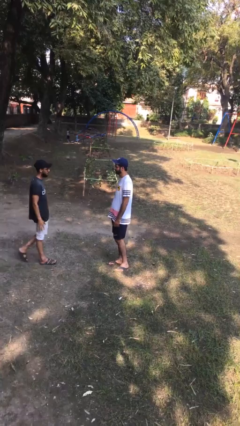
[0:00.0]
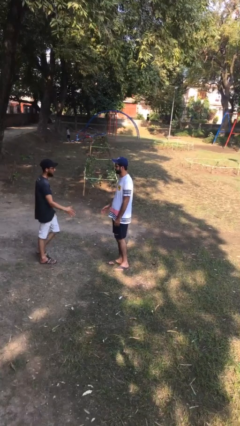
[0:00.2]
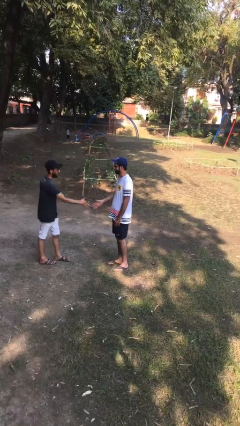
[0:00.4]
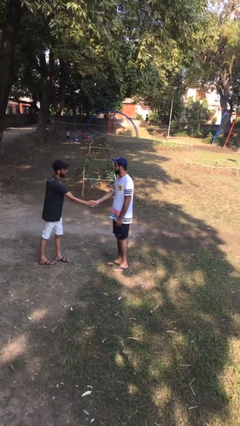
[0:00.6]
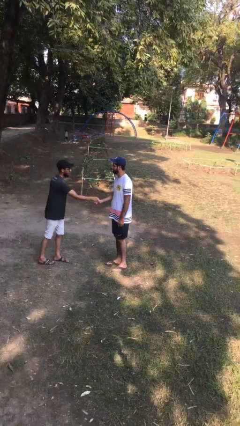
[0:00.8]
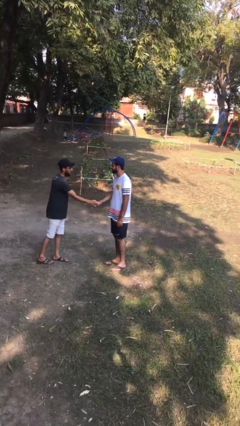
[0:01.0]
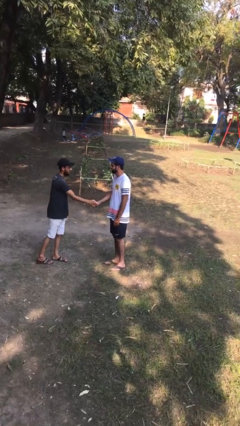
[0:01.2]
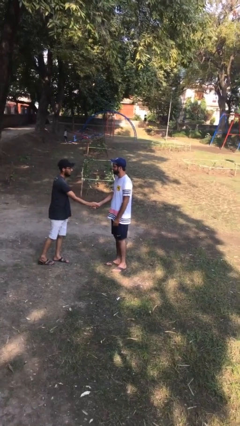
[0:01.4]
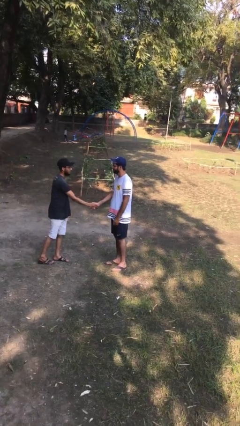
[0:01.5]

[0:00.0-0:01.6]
person shakes hand

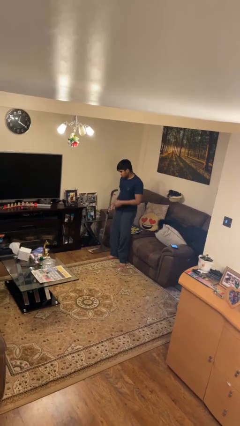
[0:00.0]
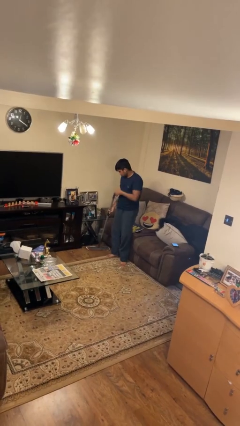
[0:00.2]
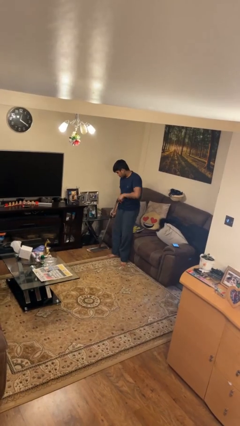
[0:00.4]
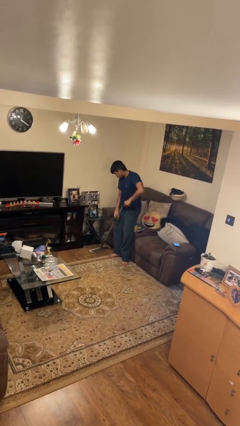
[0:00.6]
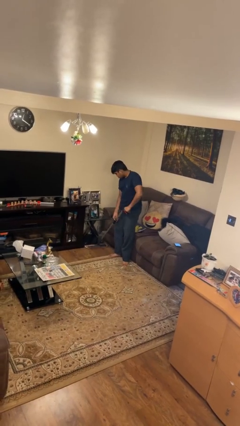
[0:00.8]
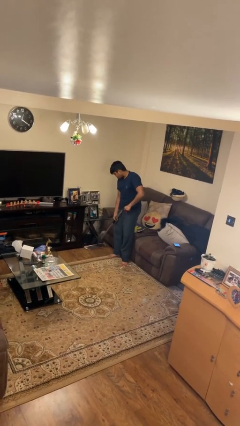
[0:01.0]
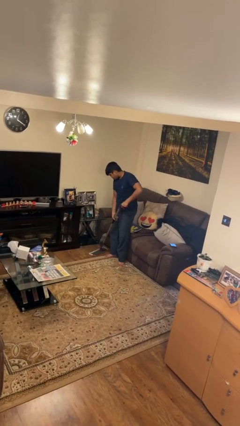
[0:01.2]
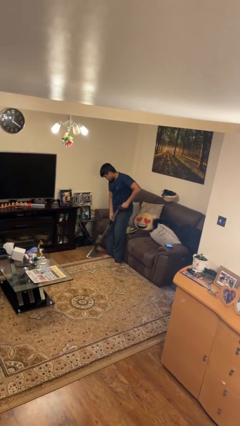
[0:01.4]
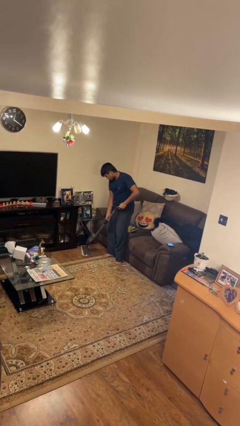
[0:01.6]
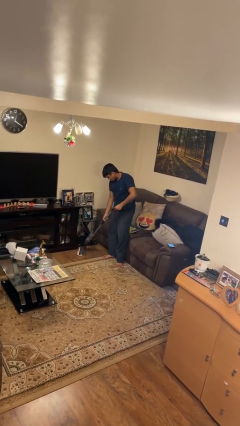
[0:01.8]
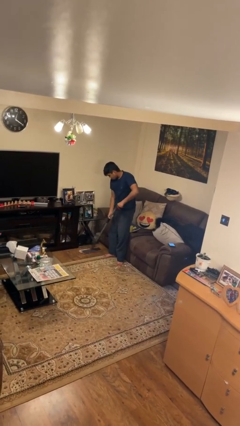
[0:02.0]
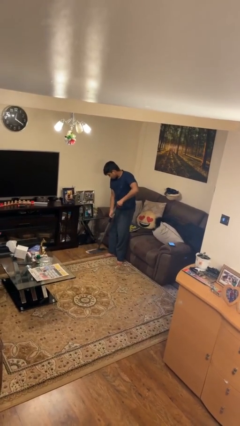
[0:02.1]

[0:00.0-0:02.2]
person mops

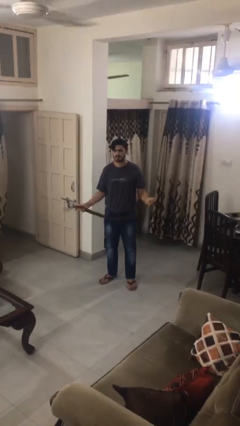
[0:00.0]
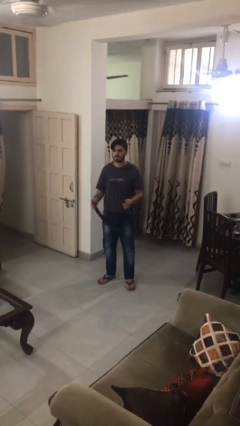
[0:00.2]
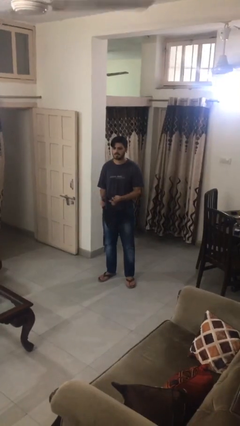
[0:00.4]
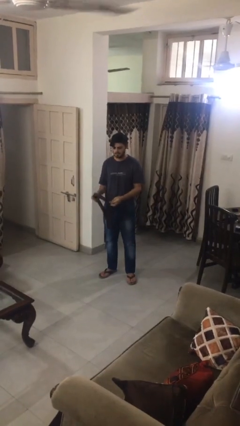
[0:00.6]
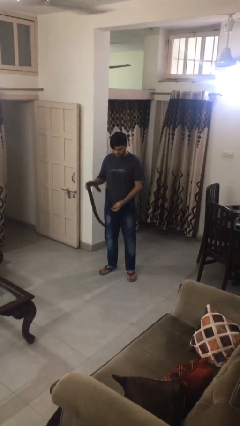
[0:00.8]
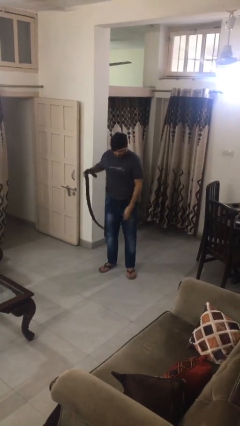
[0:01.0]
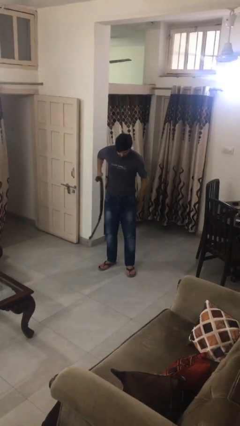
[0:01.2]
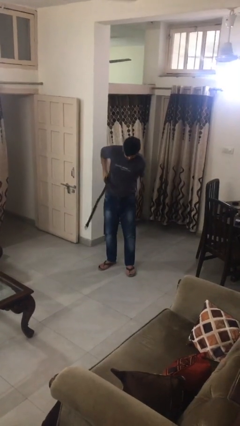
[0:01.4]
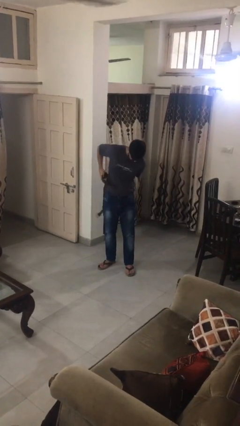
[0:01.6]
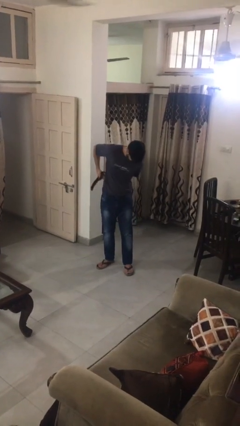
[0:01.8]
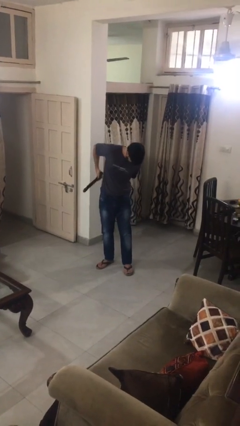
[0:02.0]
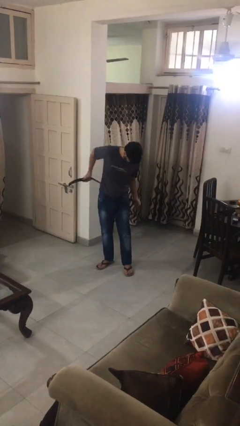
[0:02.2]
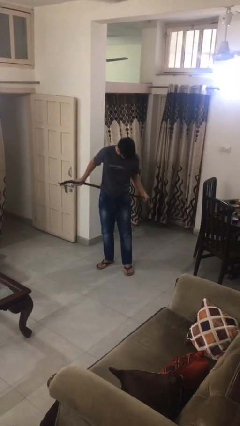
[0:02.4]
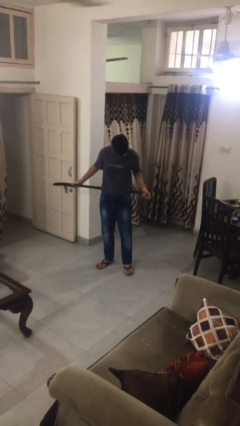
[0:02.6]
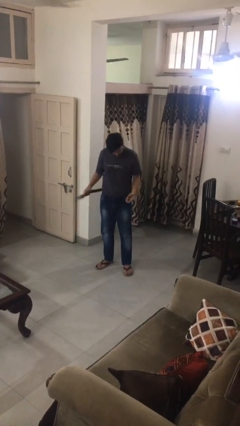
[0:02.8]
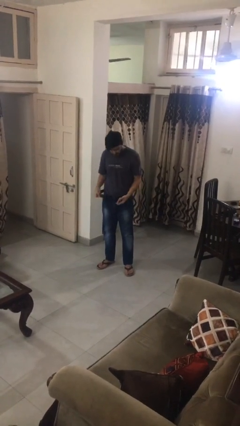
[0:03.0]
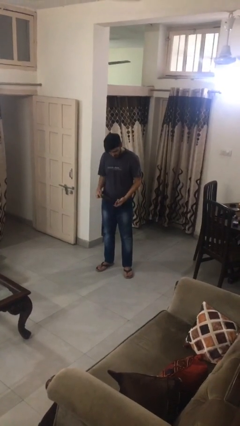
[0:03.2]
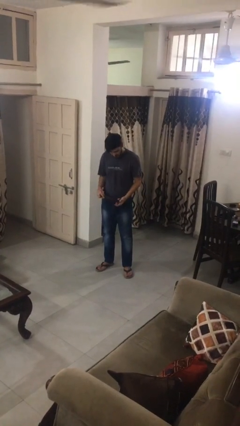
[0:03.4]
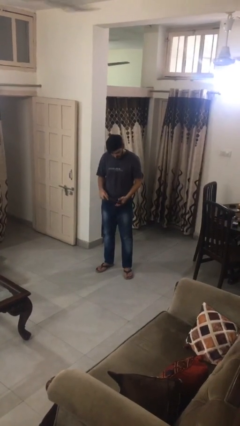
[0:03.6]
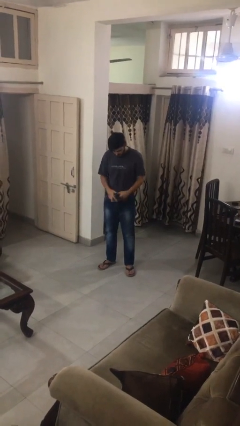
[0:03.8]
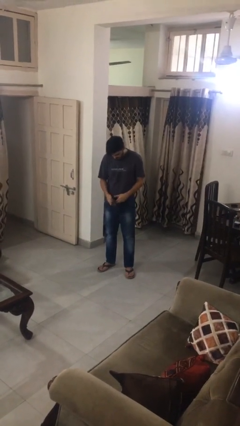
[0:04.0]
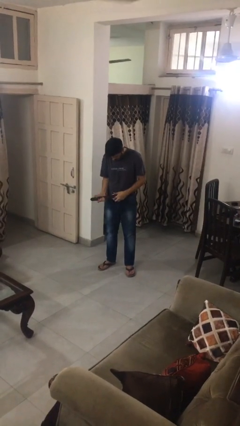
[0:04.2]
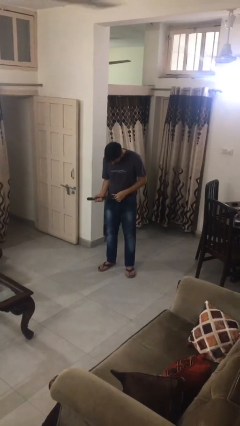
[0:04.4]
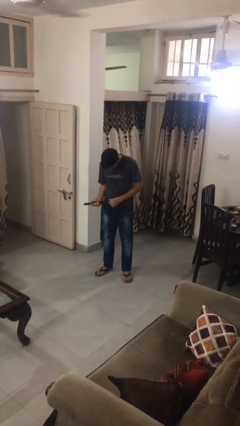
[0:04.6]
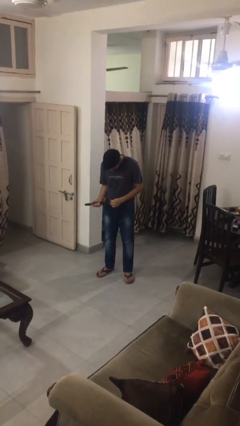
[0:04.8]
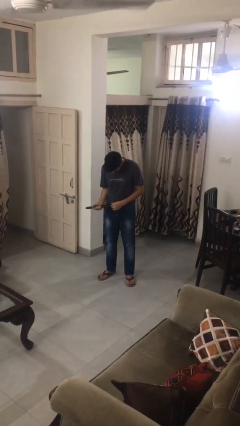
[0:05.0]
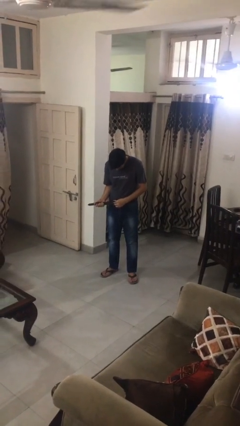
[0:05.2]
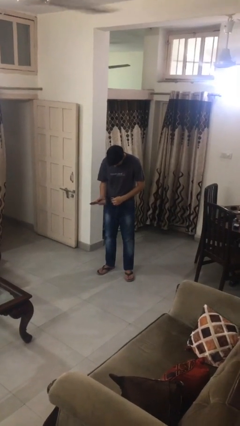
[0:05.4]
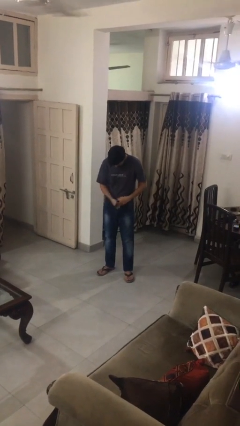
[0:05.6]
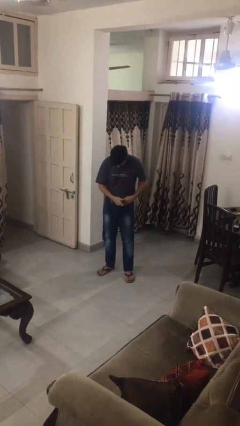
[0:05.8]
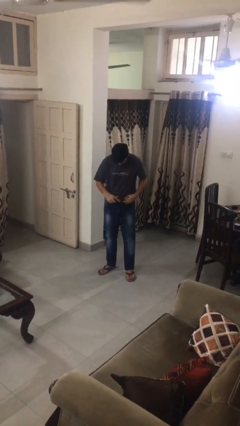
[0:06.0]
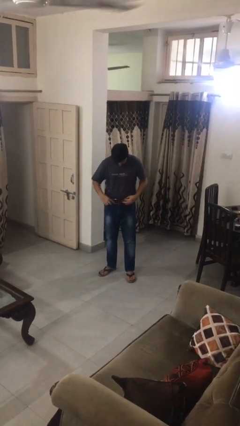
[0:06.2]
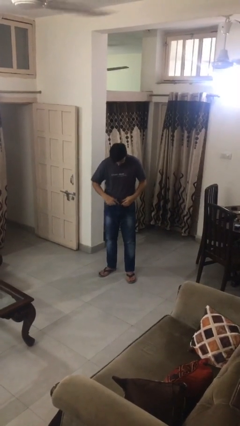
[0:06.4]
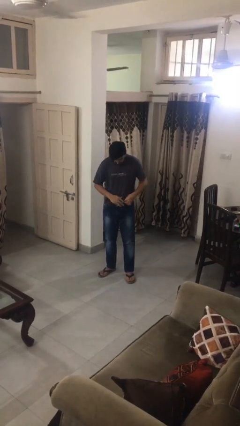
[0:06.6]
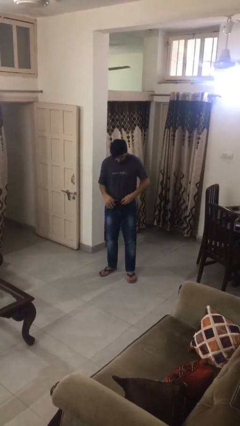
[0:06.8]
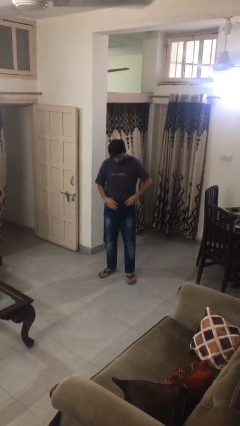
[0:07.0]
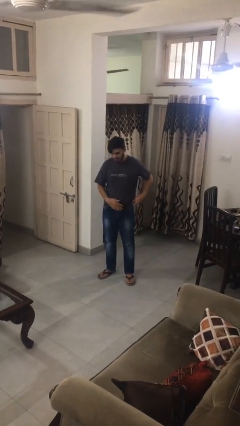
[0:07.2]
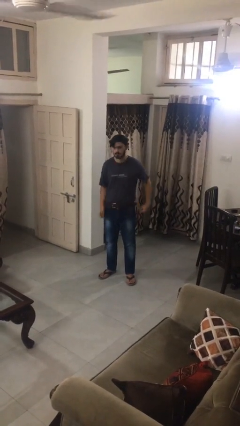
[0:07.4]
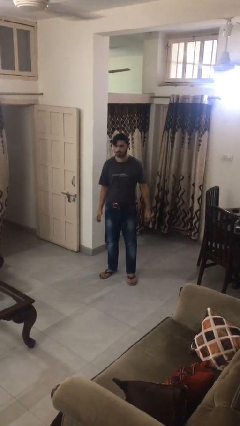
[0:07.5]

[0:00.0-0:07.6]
person puts on belt

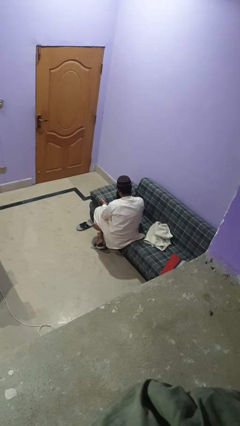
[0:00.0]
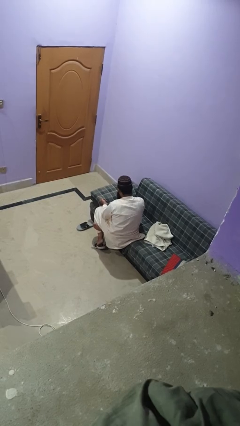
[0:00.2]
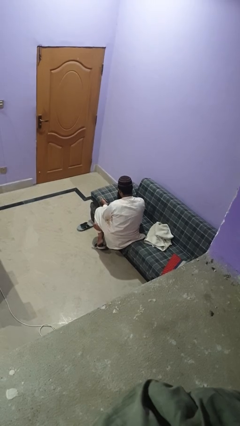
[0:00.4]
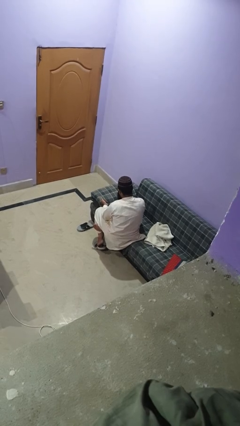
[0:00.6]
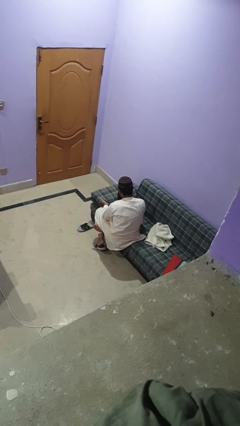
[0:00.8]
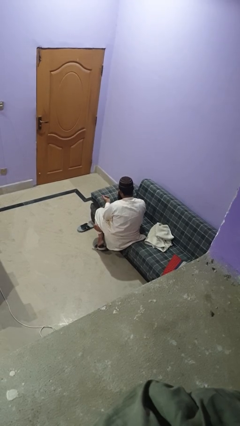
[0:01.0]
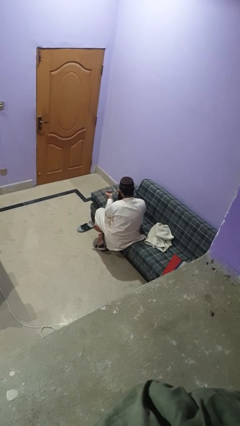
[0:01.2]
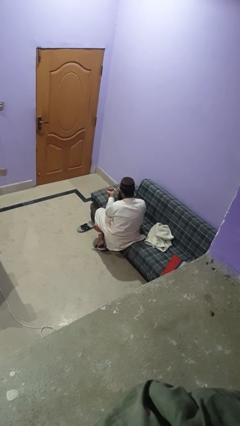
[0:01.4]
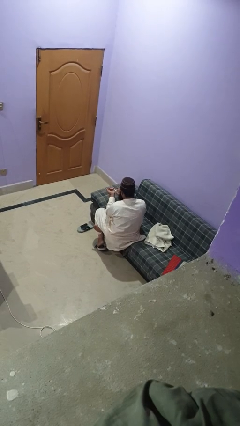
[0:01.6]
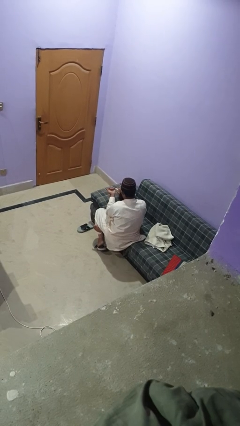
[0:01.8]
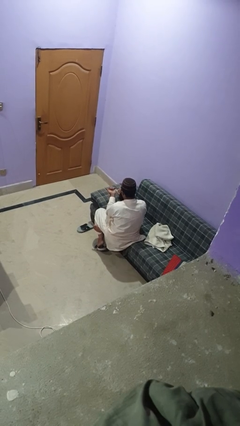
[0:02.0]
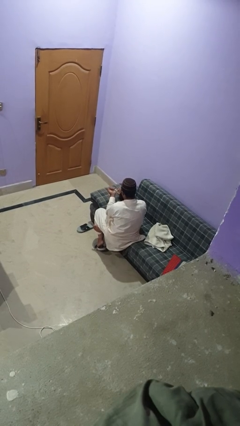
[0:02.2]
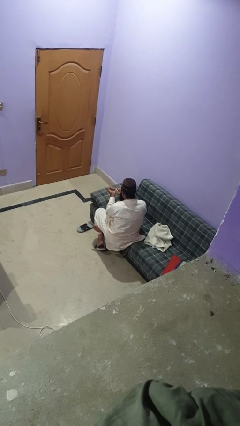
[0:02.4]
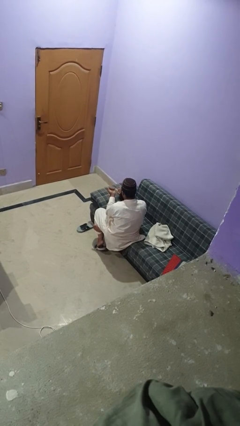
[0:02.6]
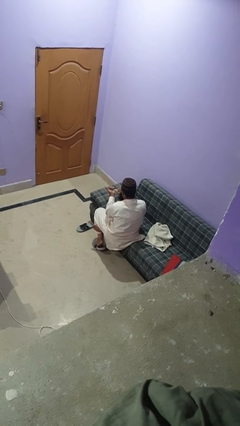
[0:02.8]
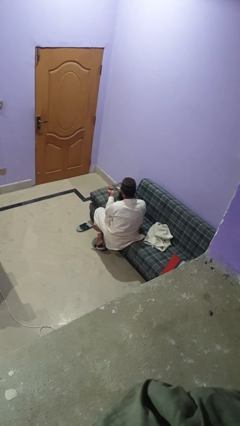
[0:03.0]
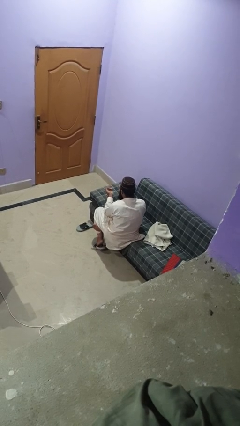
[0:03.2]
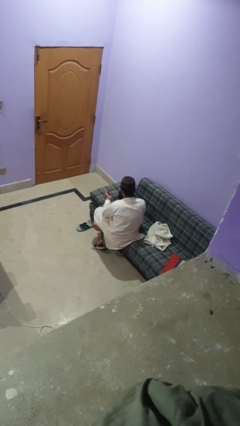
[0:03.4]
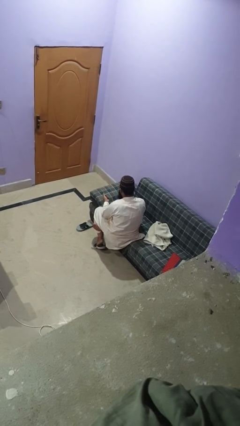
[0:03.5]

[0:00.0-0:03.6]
person paints fingernails

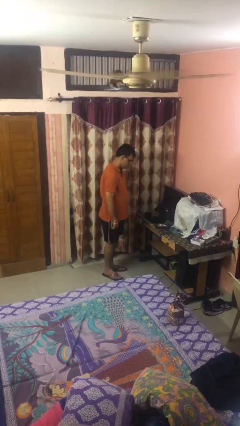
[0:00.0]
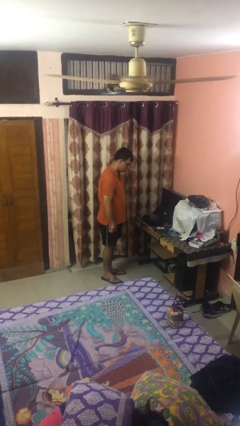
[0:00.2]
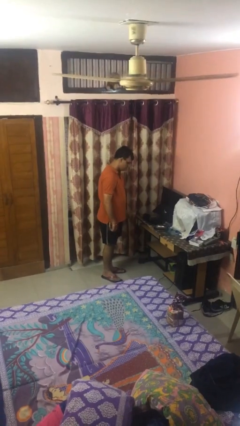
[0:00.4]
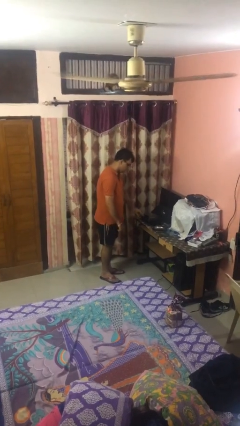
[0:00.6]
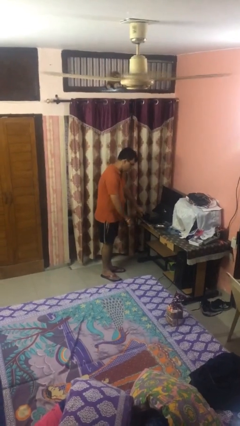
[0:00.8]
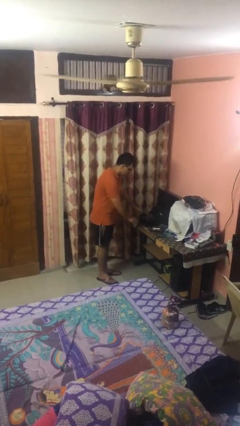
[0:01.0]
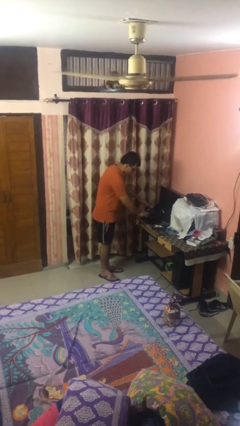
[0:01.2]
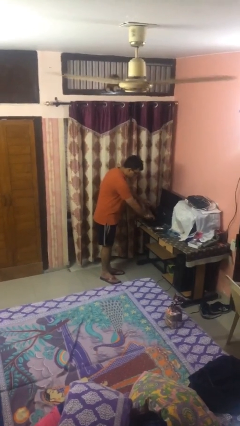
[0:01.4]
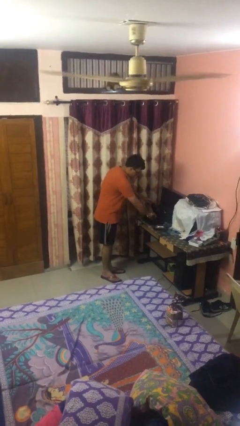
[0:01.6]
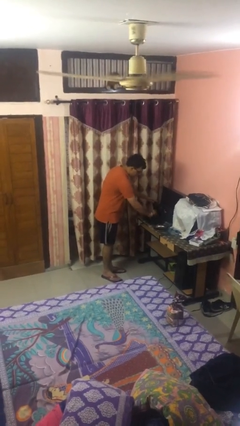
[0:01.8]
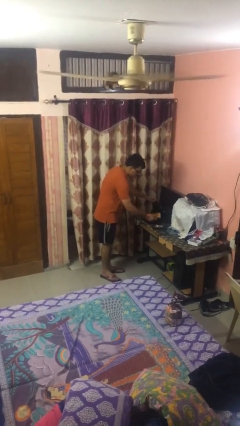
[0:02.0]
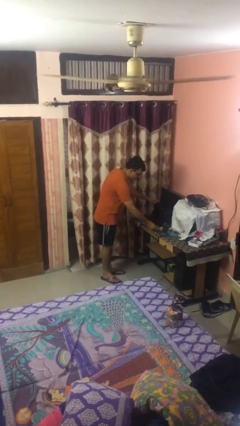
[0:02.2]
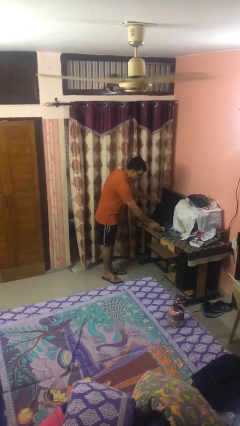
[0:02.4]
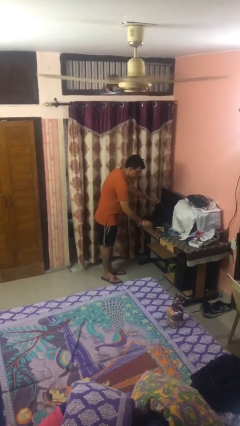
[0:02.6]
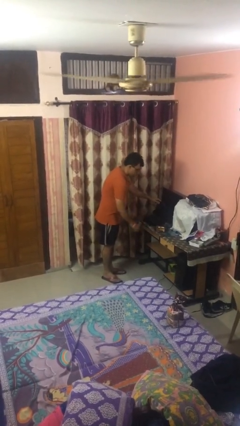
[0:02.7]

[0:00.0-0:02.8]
person takes object from toaster
